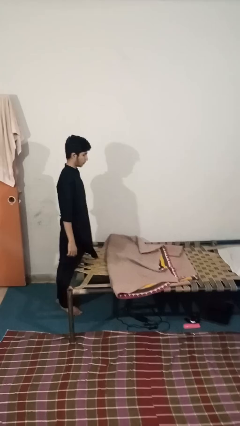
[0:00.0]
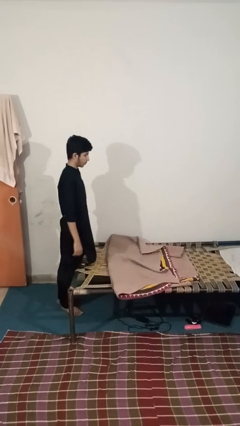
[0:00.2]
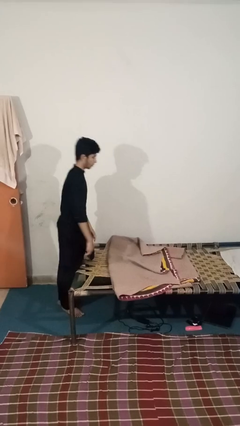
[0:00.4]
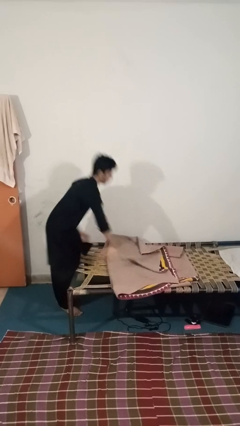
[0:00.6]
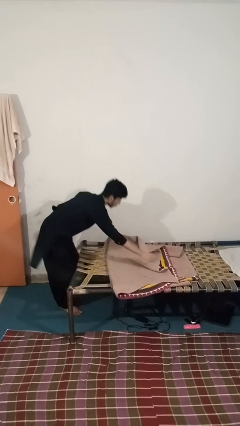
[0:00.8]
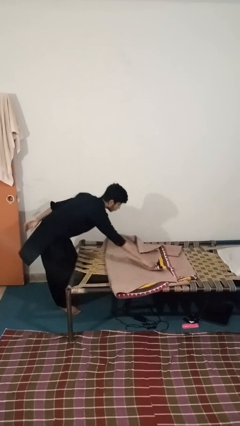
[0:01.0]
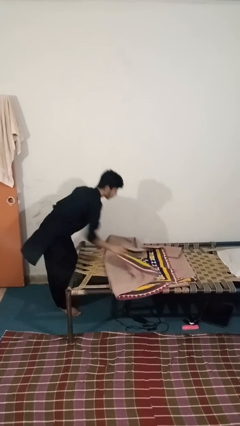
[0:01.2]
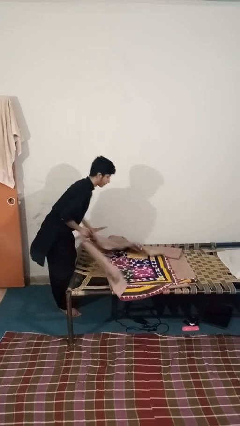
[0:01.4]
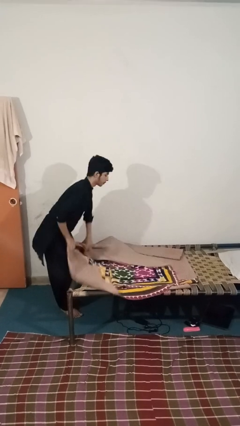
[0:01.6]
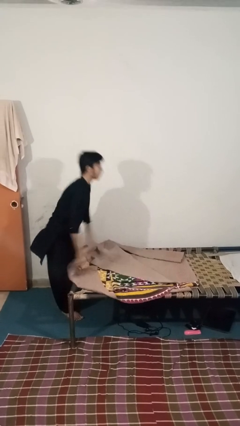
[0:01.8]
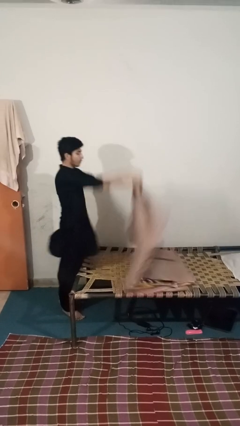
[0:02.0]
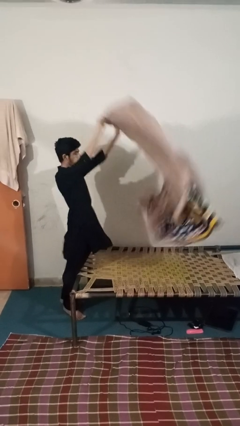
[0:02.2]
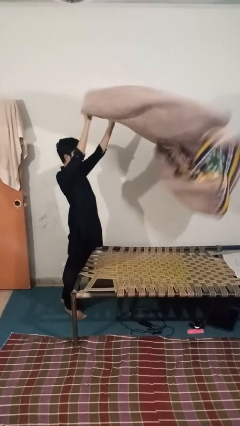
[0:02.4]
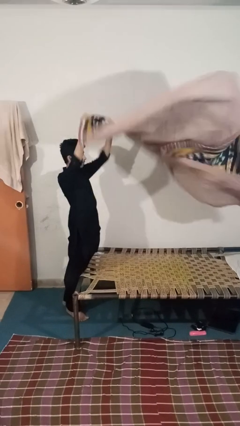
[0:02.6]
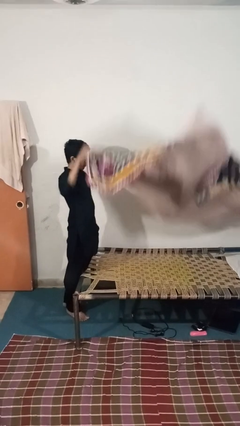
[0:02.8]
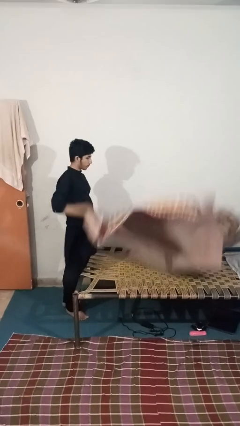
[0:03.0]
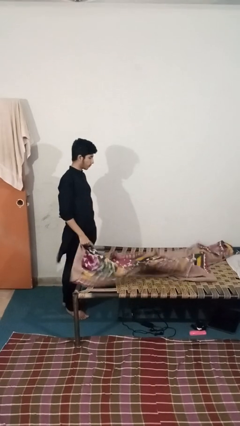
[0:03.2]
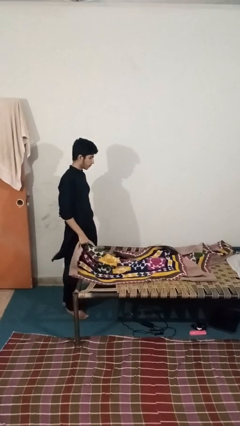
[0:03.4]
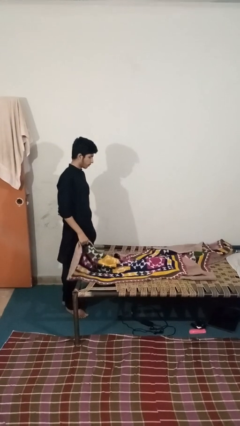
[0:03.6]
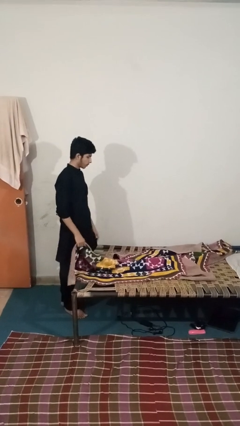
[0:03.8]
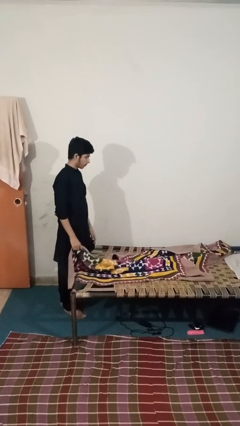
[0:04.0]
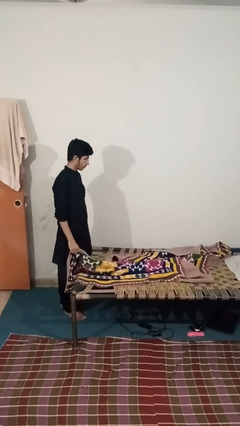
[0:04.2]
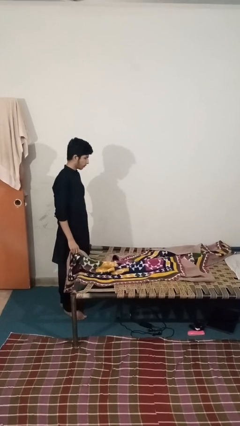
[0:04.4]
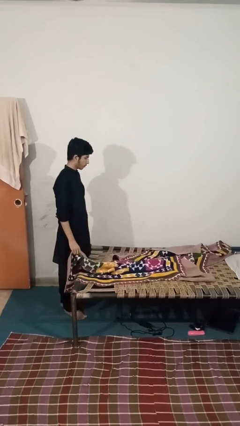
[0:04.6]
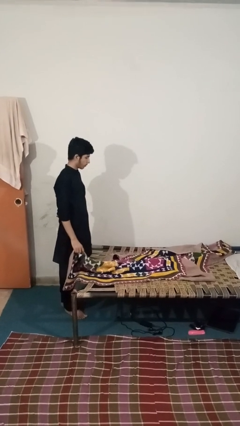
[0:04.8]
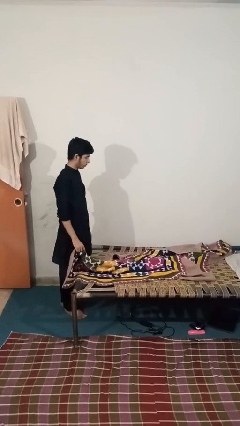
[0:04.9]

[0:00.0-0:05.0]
person unfolds blanket

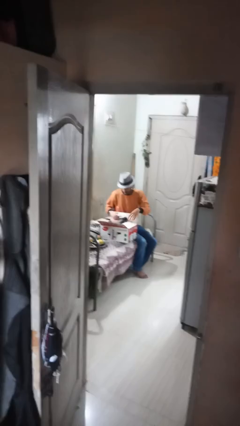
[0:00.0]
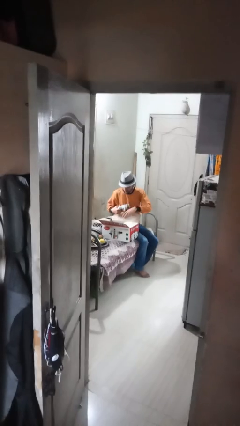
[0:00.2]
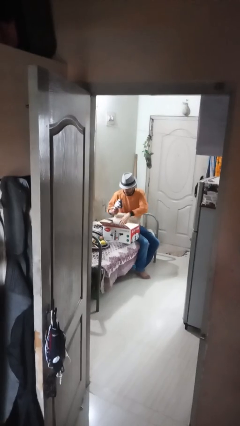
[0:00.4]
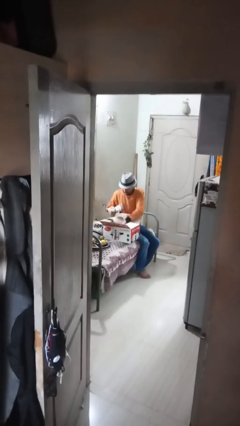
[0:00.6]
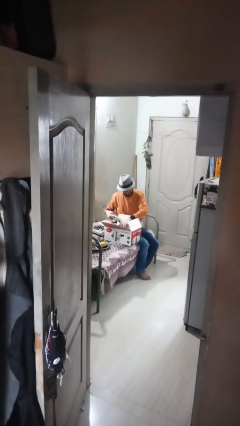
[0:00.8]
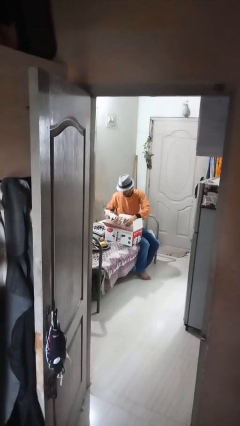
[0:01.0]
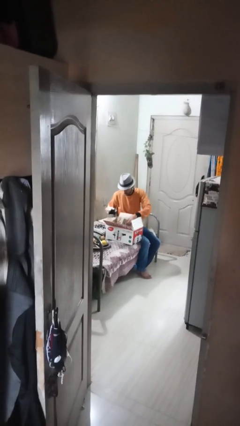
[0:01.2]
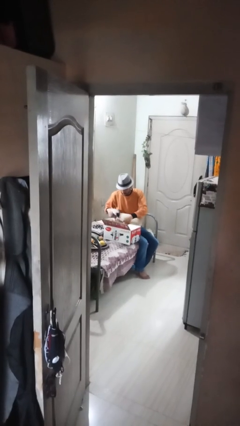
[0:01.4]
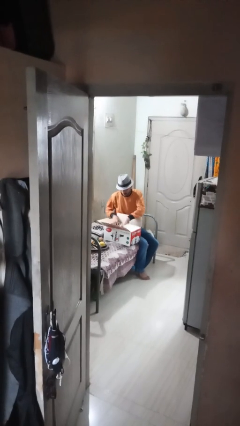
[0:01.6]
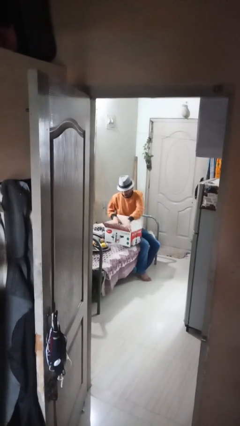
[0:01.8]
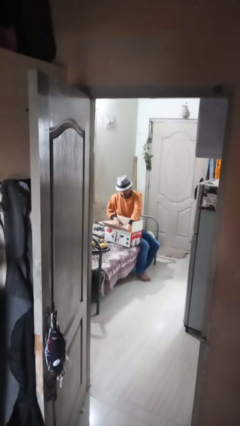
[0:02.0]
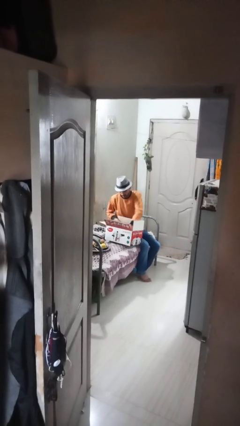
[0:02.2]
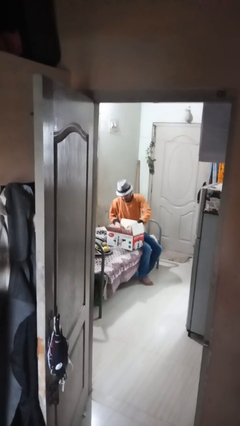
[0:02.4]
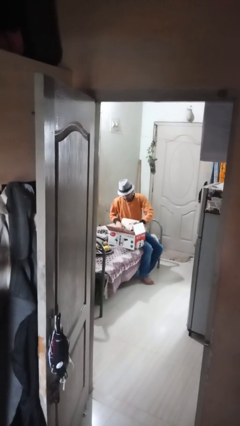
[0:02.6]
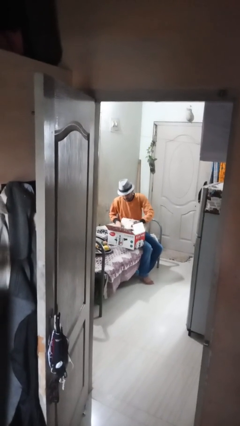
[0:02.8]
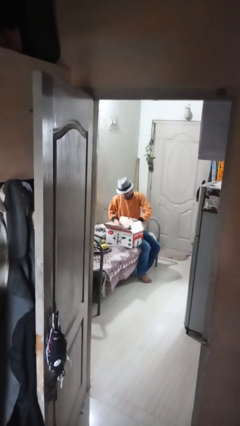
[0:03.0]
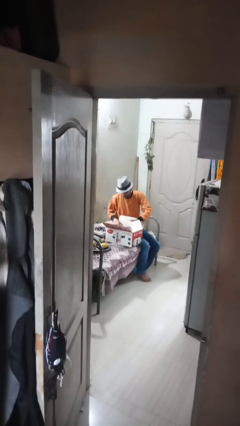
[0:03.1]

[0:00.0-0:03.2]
person searches in box

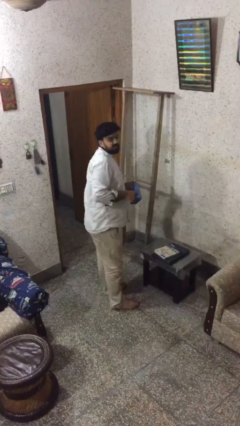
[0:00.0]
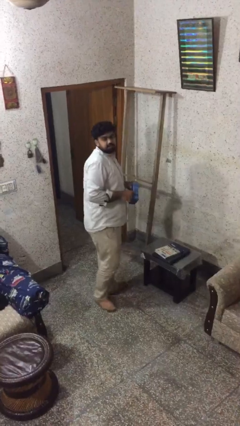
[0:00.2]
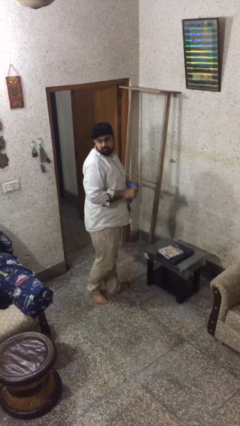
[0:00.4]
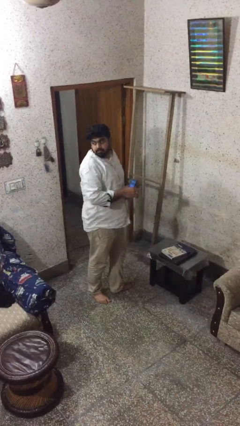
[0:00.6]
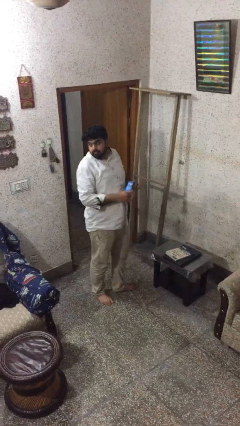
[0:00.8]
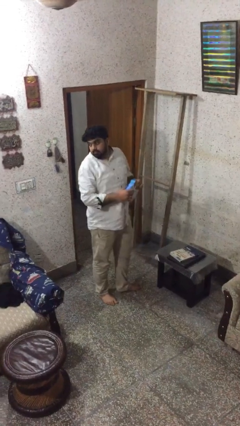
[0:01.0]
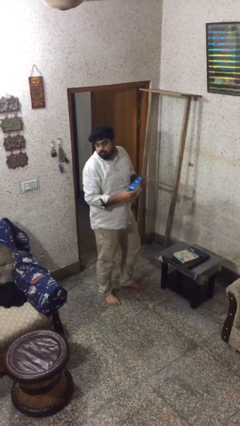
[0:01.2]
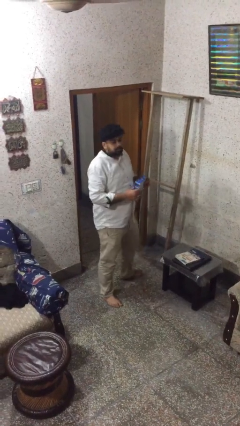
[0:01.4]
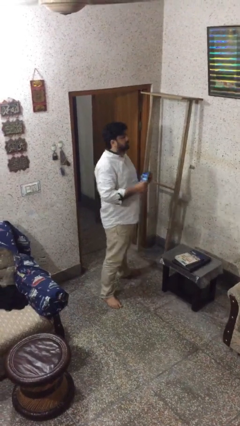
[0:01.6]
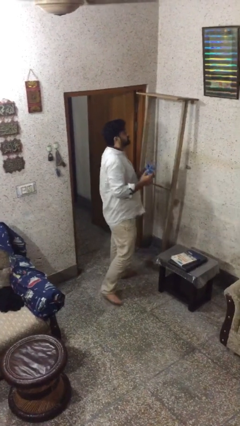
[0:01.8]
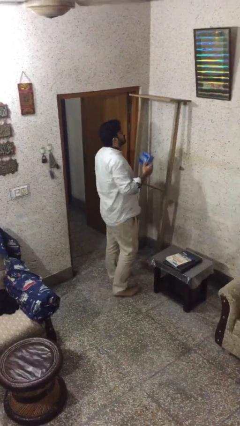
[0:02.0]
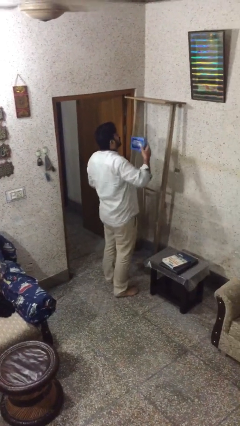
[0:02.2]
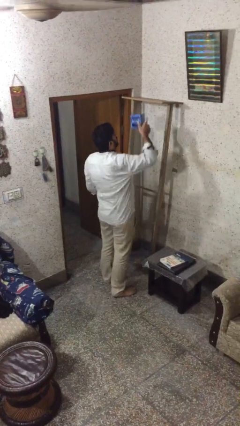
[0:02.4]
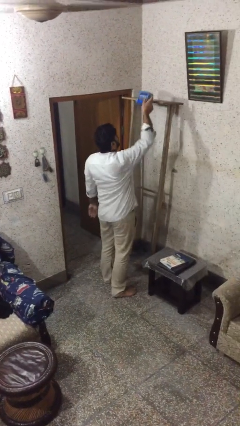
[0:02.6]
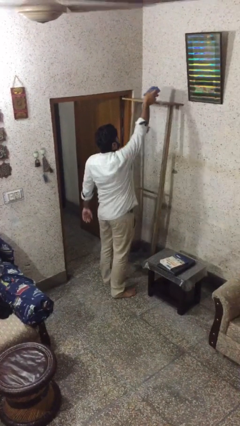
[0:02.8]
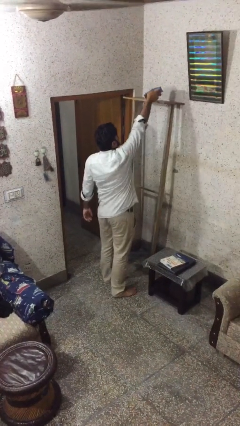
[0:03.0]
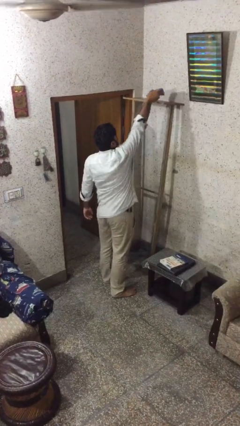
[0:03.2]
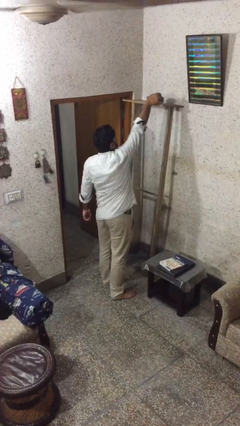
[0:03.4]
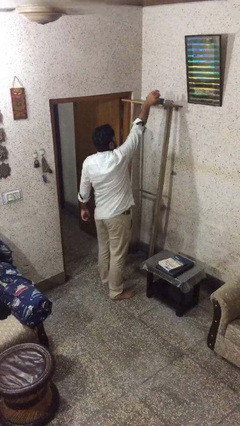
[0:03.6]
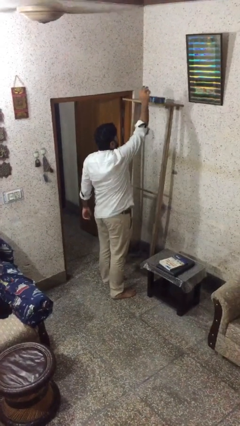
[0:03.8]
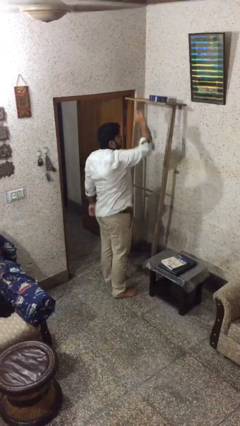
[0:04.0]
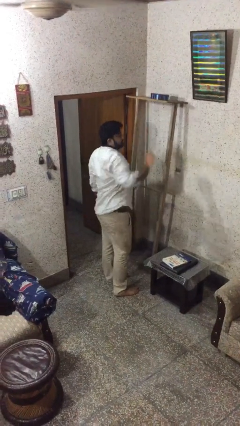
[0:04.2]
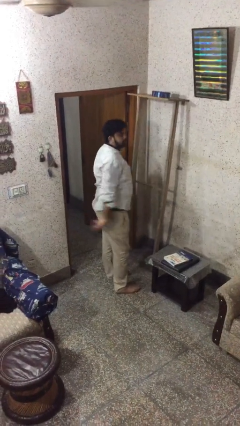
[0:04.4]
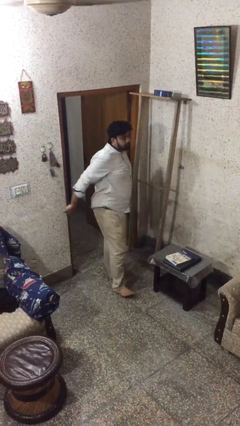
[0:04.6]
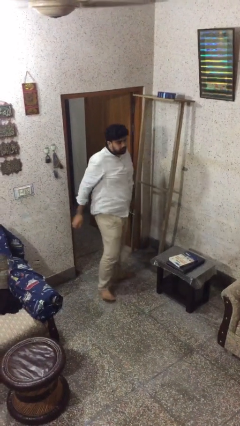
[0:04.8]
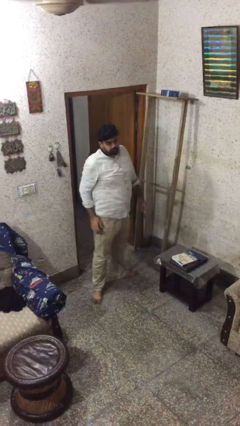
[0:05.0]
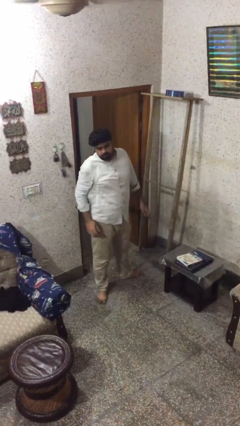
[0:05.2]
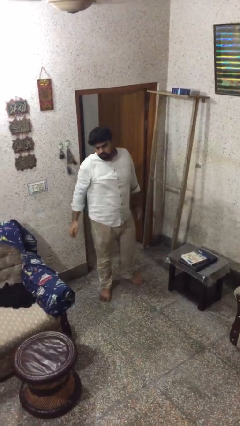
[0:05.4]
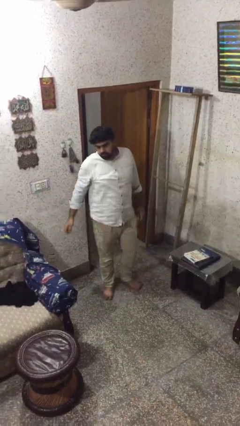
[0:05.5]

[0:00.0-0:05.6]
person puts down object on shelf

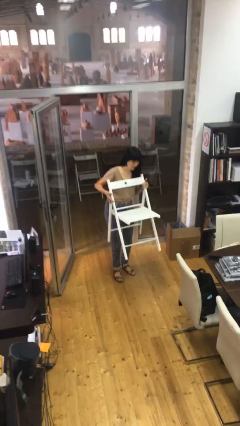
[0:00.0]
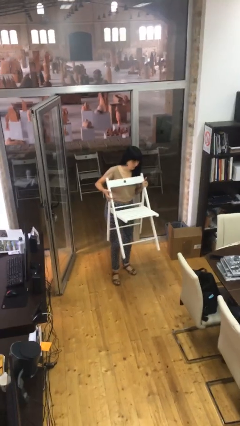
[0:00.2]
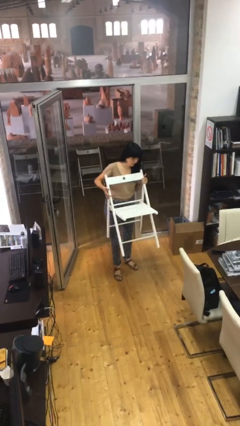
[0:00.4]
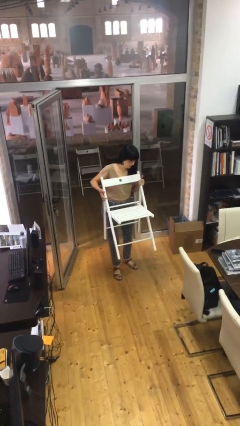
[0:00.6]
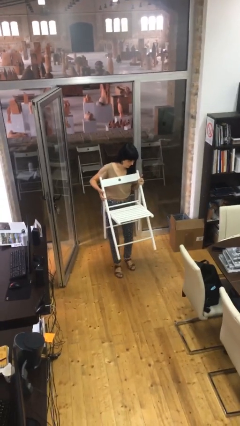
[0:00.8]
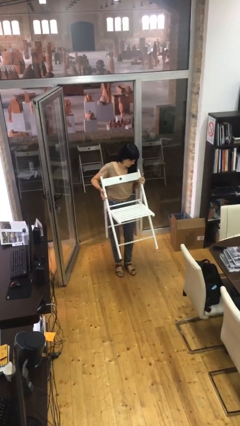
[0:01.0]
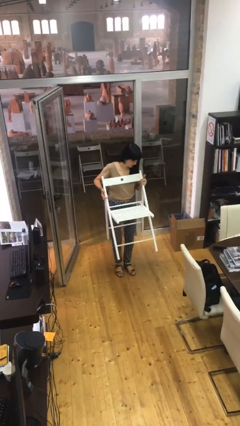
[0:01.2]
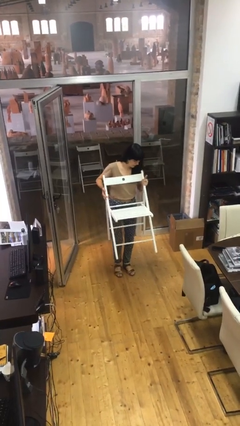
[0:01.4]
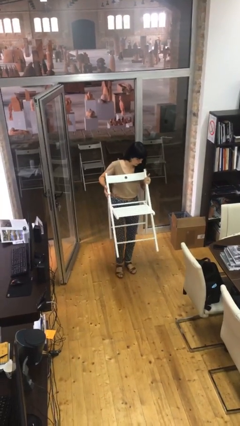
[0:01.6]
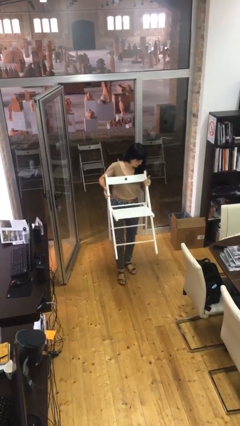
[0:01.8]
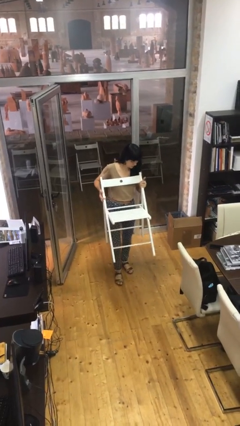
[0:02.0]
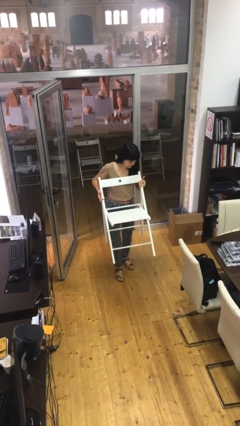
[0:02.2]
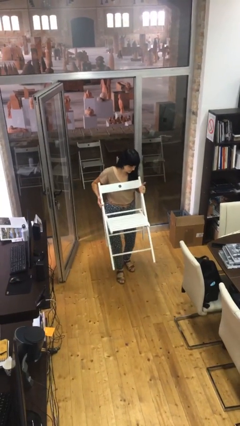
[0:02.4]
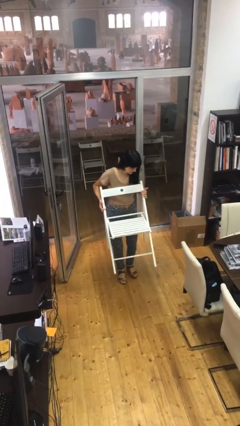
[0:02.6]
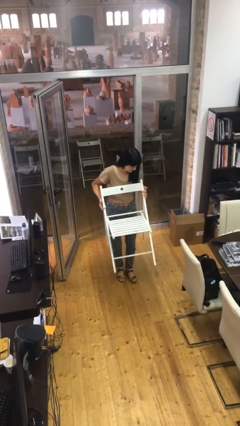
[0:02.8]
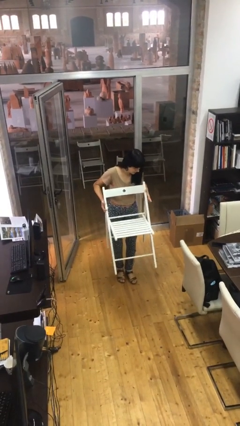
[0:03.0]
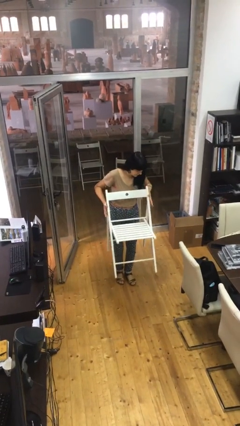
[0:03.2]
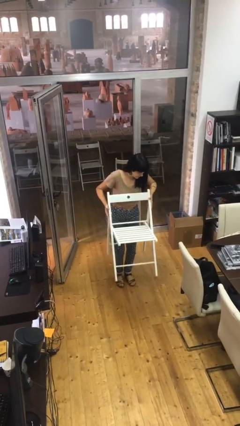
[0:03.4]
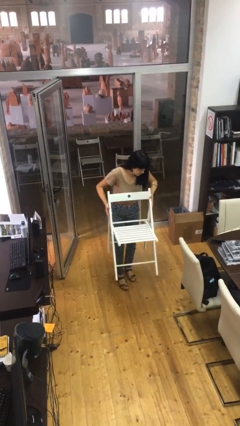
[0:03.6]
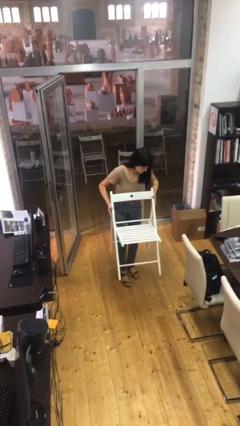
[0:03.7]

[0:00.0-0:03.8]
person carries heavy object
